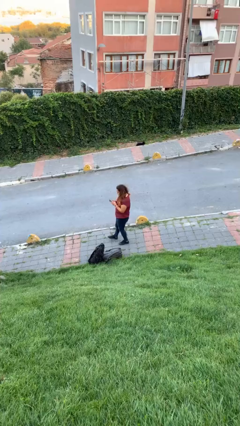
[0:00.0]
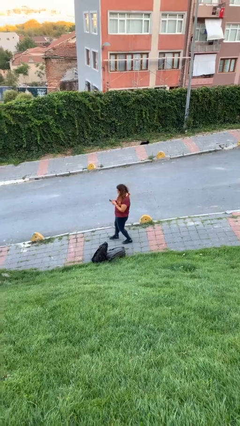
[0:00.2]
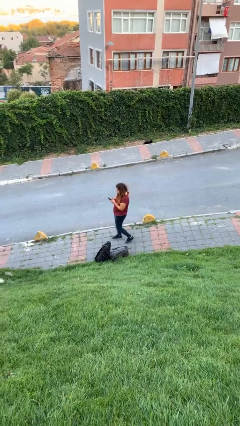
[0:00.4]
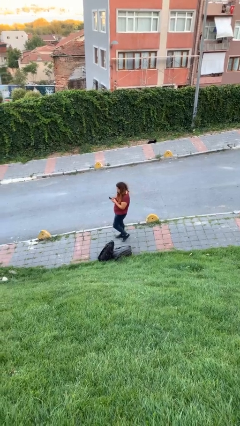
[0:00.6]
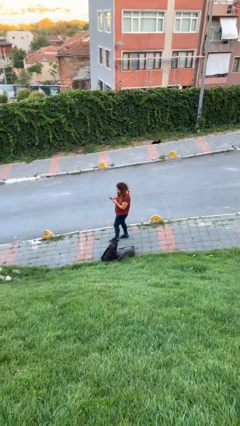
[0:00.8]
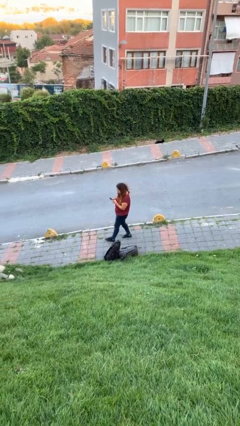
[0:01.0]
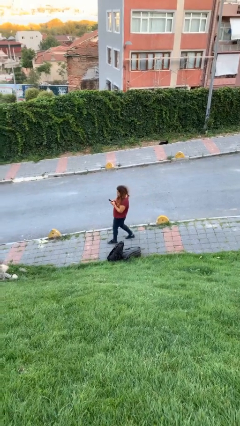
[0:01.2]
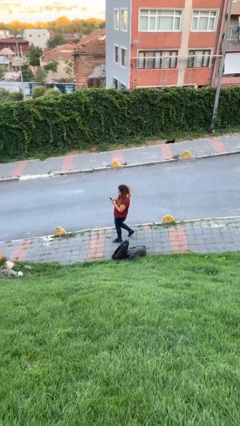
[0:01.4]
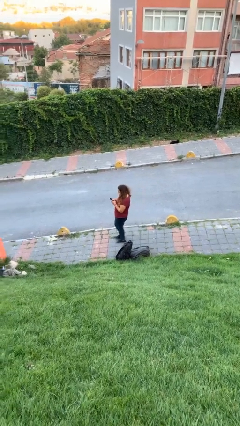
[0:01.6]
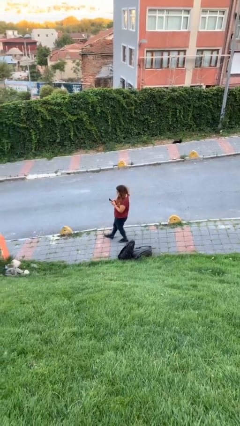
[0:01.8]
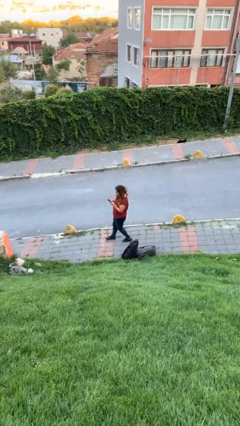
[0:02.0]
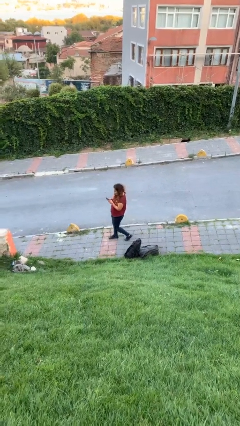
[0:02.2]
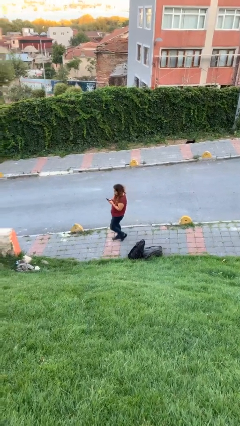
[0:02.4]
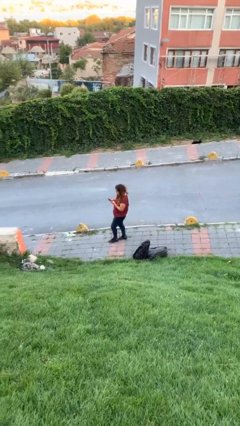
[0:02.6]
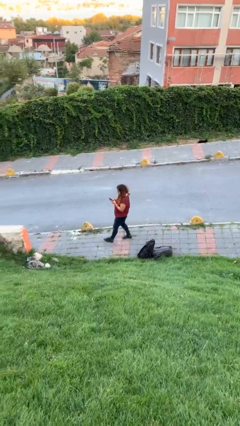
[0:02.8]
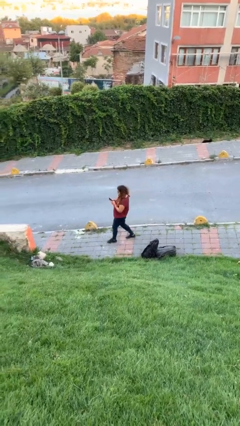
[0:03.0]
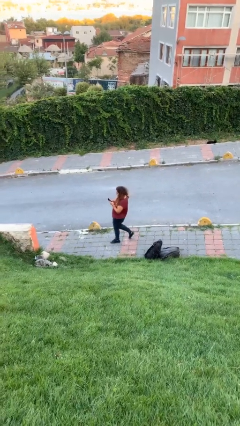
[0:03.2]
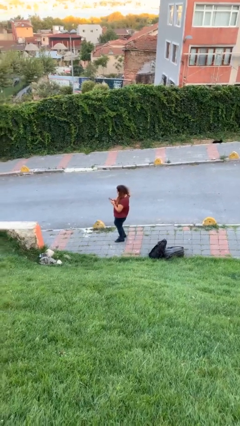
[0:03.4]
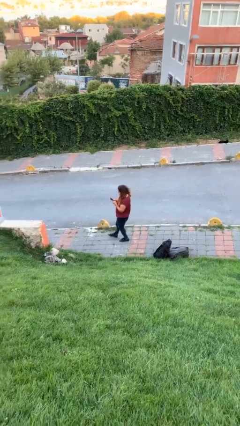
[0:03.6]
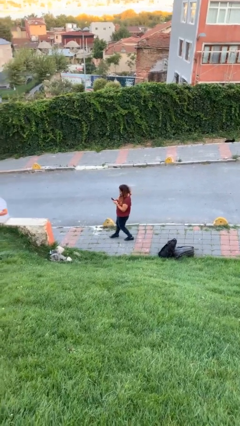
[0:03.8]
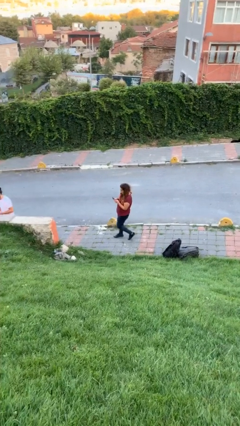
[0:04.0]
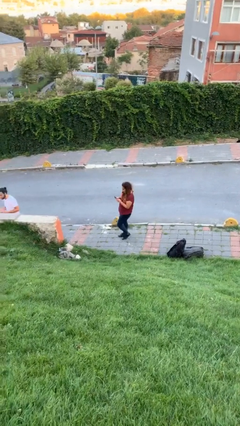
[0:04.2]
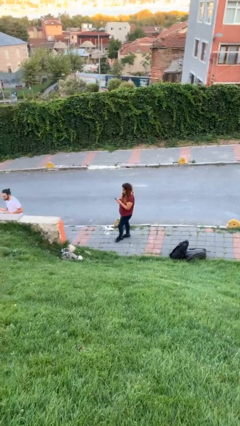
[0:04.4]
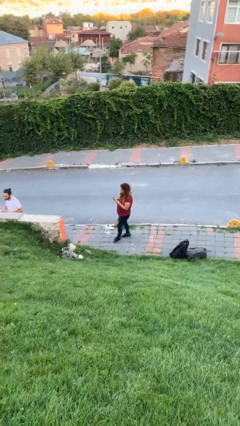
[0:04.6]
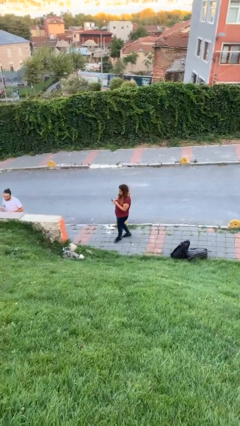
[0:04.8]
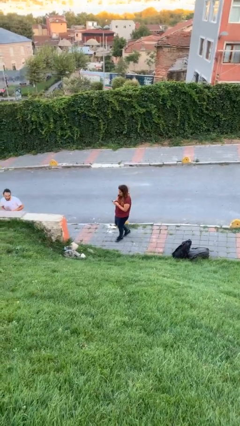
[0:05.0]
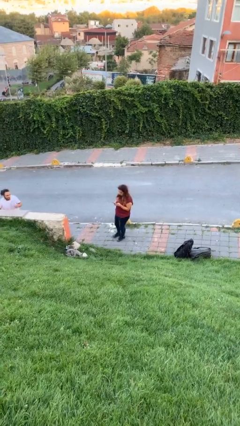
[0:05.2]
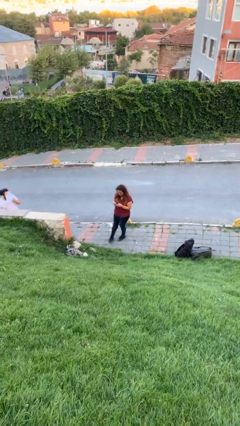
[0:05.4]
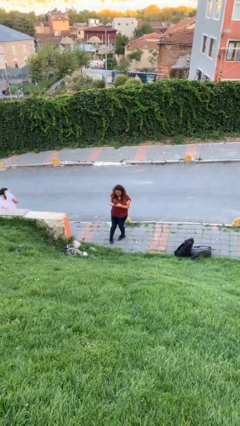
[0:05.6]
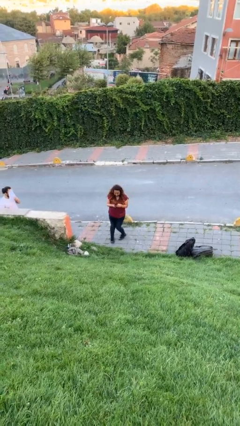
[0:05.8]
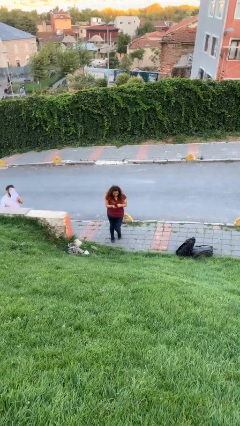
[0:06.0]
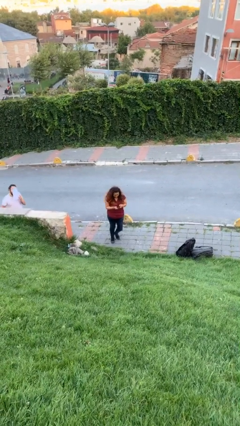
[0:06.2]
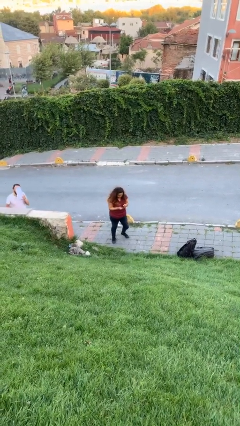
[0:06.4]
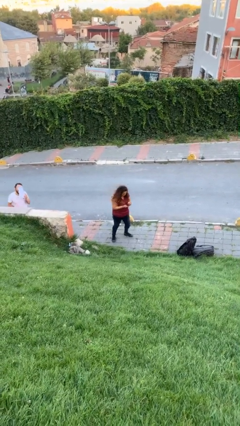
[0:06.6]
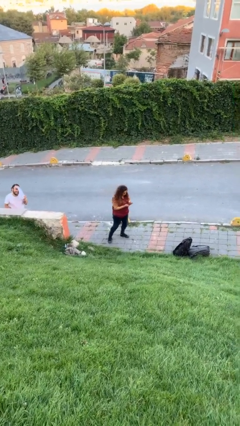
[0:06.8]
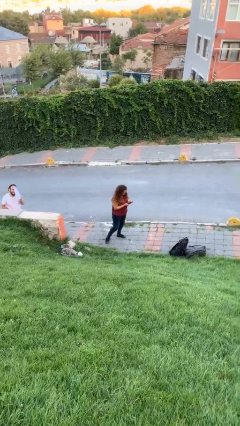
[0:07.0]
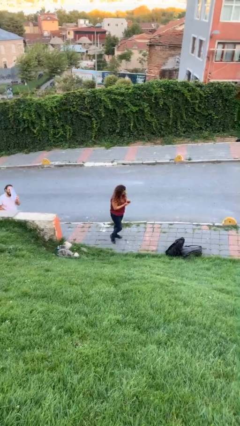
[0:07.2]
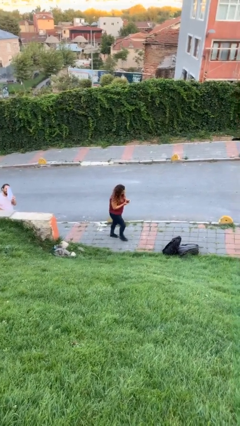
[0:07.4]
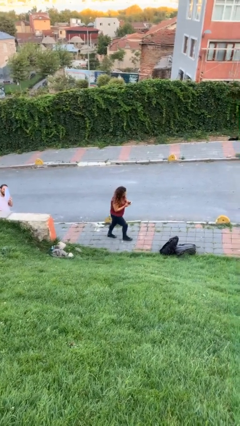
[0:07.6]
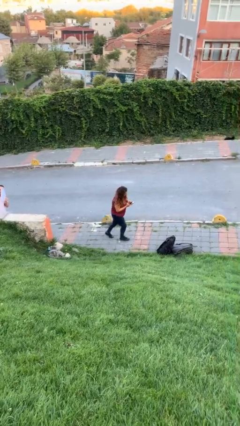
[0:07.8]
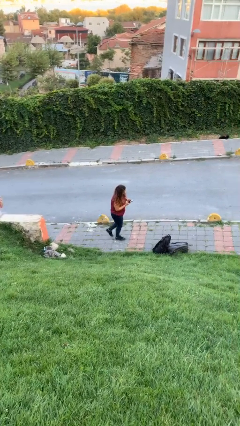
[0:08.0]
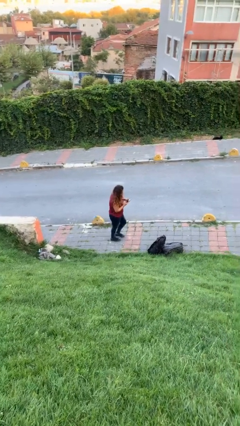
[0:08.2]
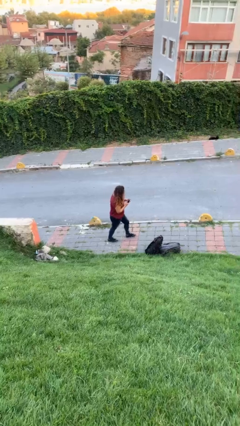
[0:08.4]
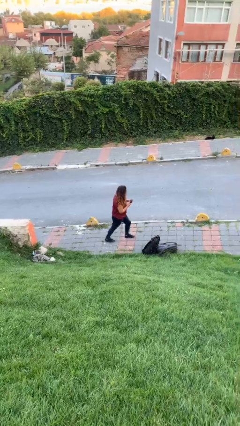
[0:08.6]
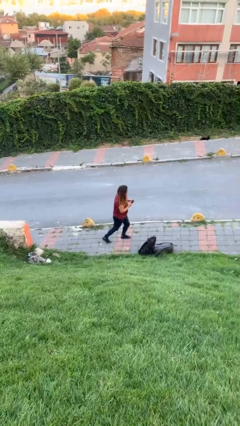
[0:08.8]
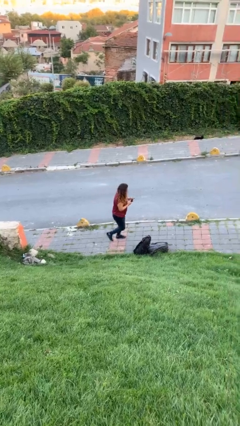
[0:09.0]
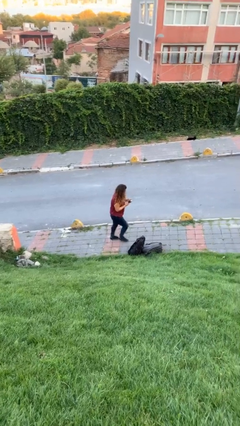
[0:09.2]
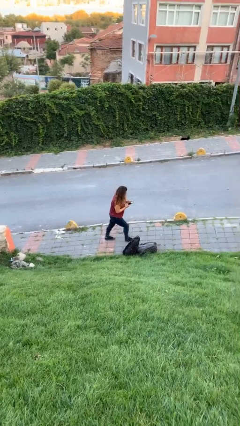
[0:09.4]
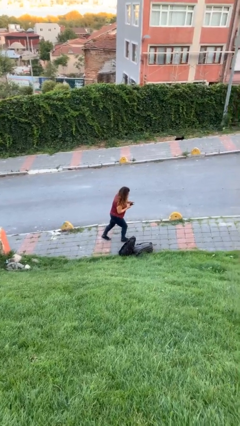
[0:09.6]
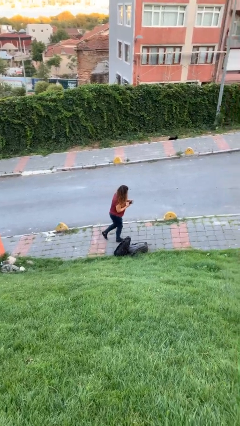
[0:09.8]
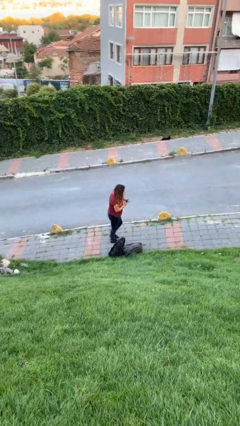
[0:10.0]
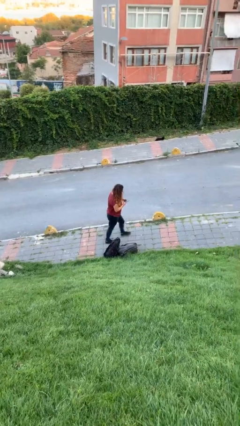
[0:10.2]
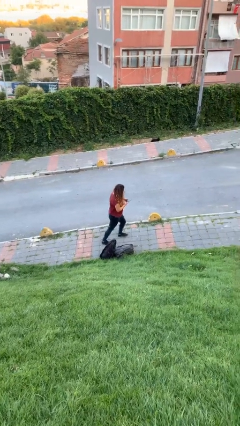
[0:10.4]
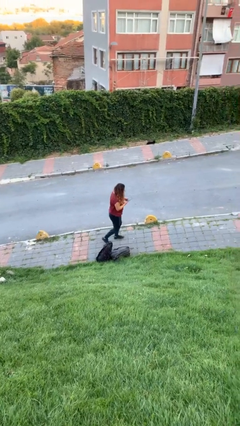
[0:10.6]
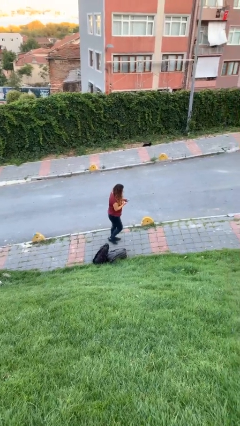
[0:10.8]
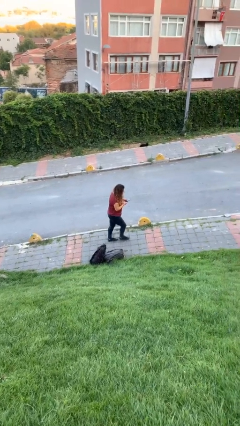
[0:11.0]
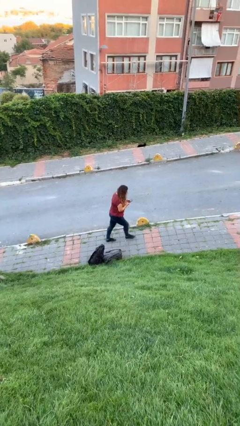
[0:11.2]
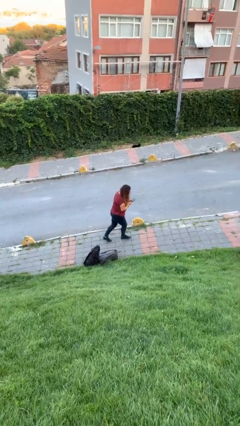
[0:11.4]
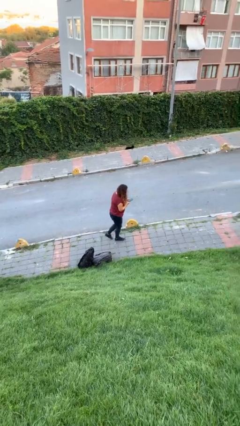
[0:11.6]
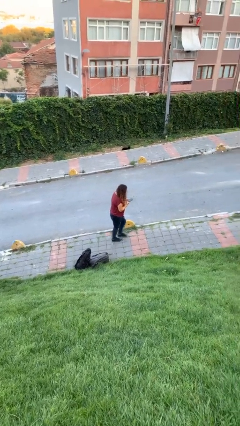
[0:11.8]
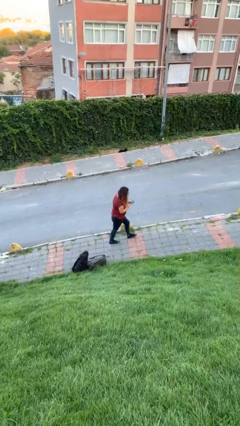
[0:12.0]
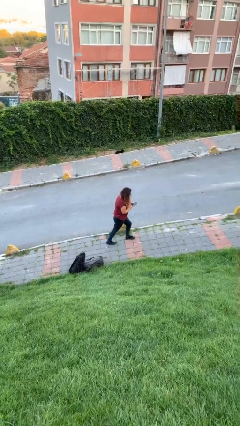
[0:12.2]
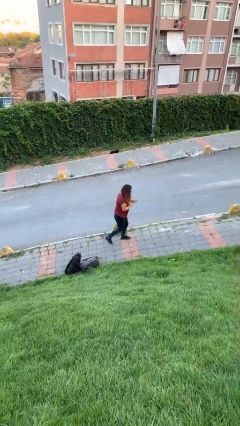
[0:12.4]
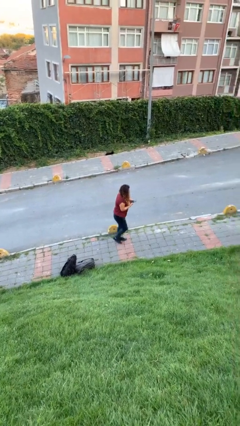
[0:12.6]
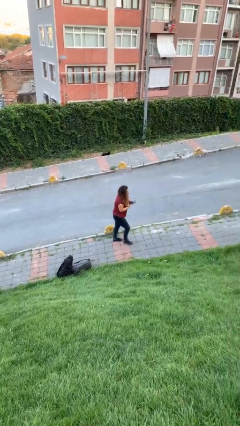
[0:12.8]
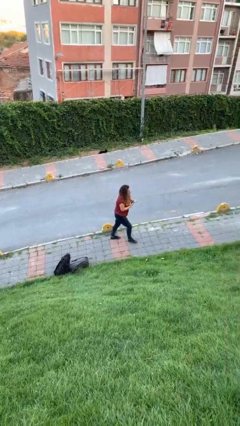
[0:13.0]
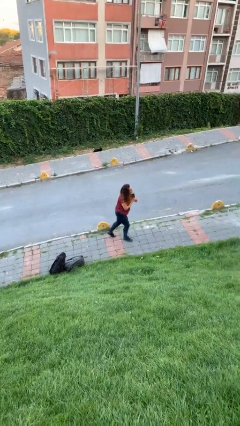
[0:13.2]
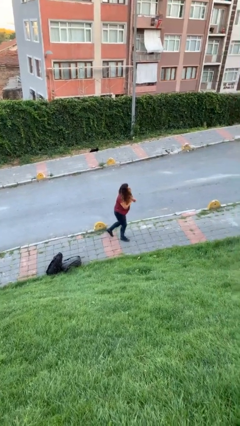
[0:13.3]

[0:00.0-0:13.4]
person texts on phone

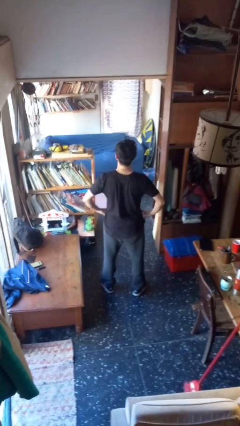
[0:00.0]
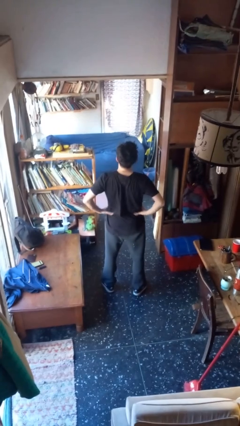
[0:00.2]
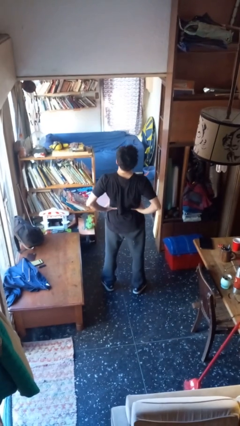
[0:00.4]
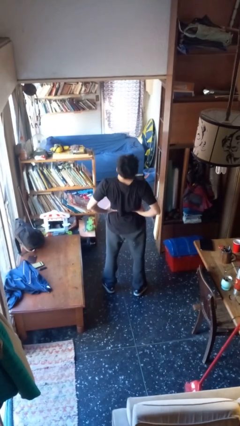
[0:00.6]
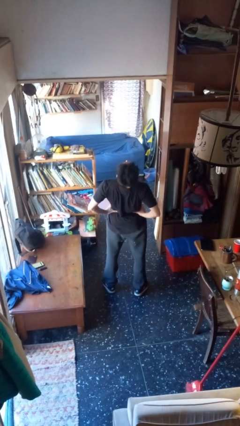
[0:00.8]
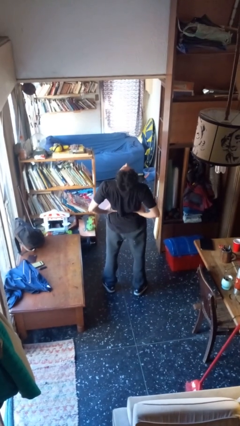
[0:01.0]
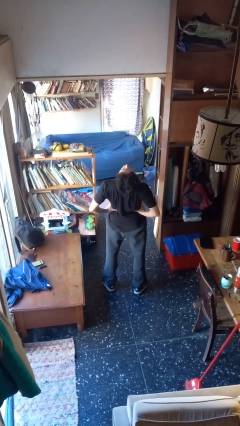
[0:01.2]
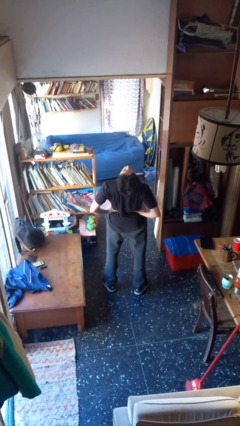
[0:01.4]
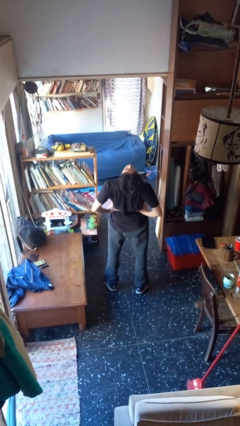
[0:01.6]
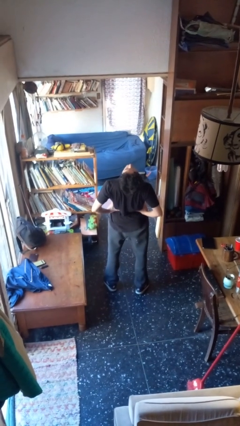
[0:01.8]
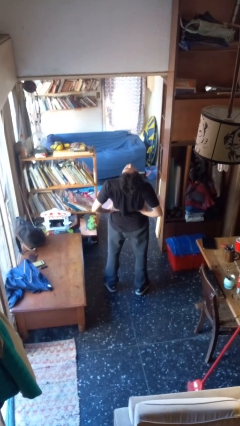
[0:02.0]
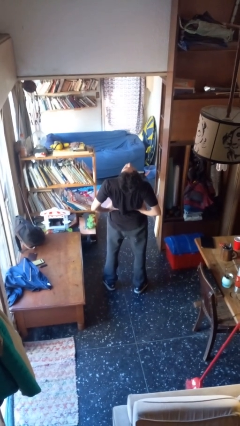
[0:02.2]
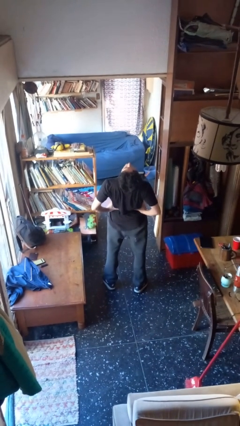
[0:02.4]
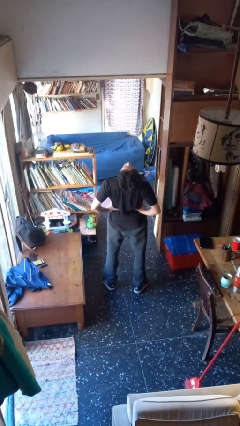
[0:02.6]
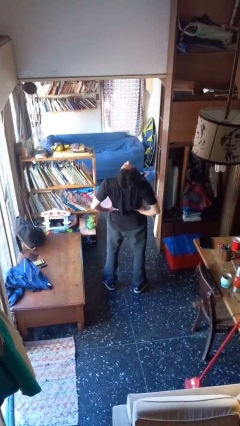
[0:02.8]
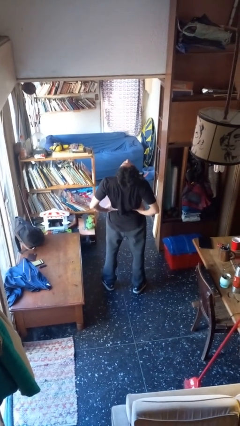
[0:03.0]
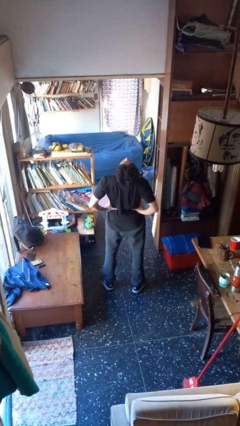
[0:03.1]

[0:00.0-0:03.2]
person stretches back

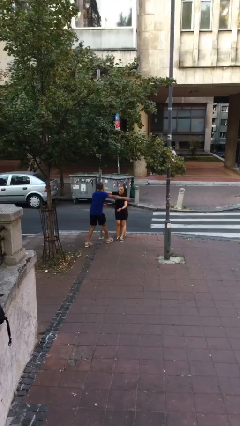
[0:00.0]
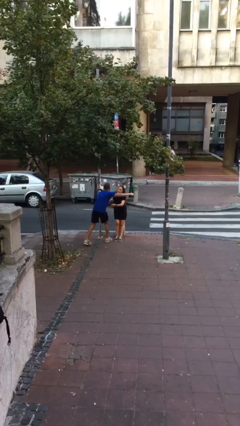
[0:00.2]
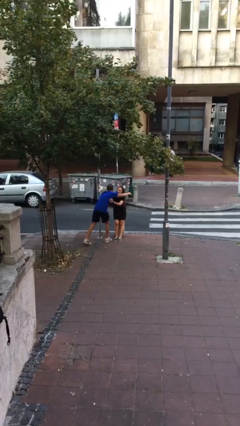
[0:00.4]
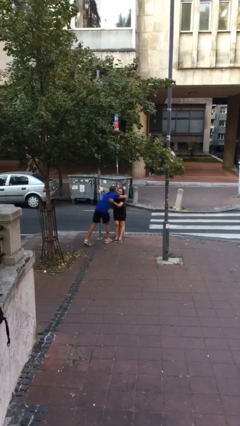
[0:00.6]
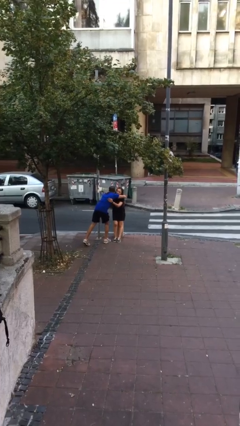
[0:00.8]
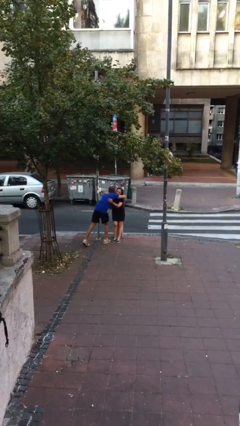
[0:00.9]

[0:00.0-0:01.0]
person embraces person

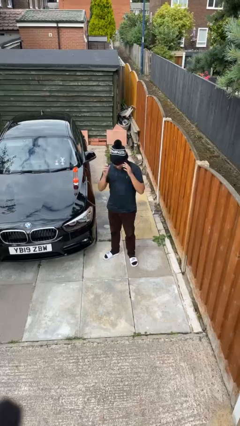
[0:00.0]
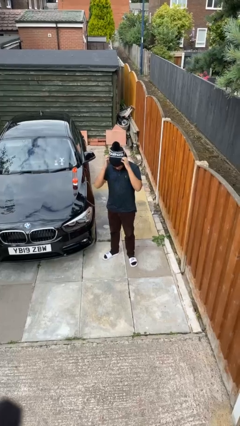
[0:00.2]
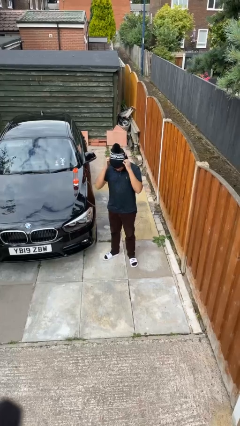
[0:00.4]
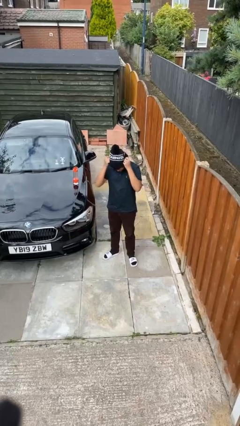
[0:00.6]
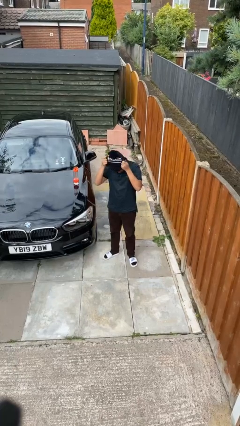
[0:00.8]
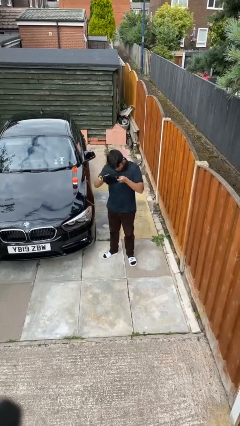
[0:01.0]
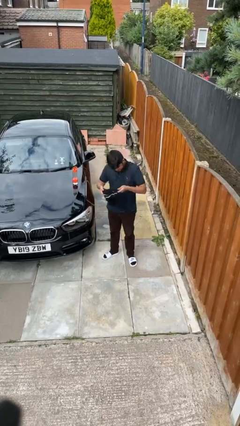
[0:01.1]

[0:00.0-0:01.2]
person takes off hat
